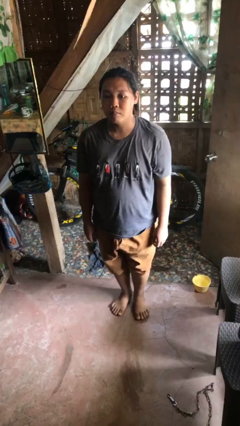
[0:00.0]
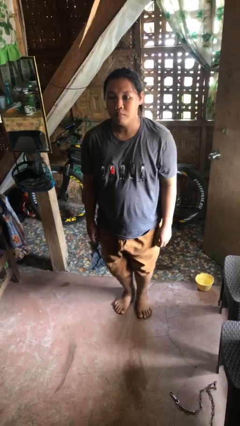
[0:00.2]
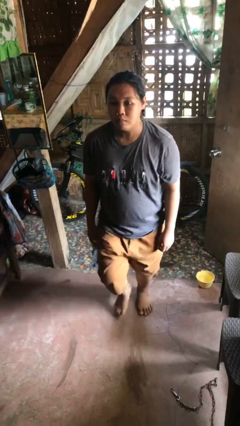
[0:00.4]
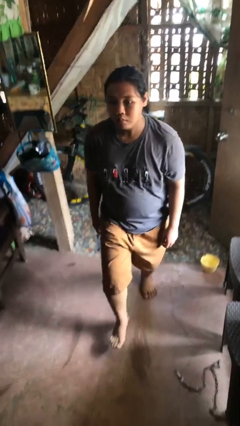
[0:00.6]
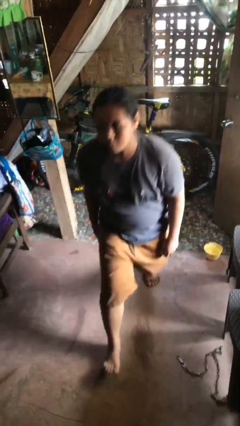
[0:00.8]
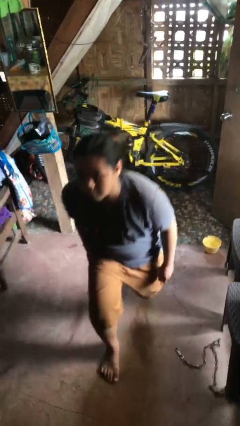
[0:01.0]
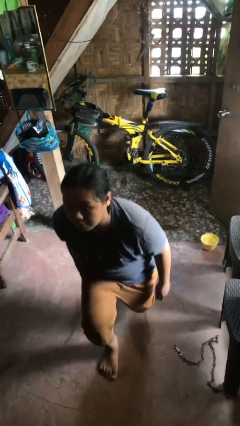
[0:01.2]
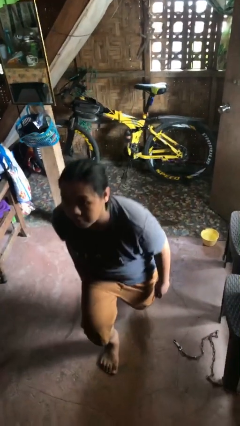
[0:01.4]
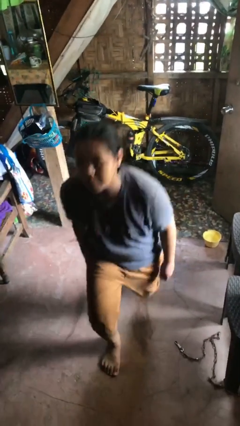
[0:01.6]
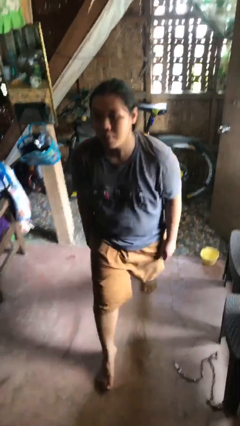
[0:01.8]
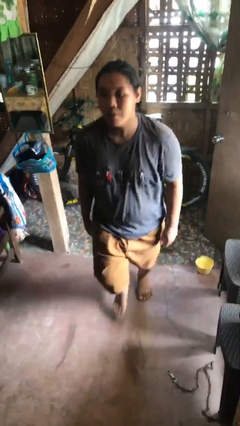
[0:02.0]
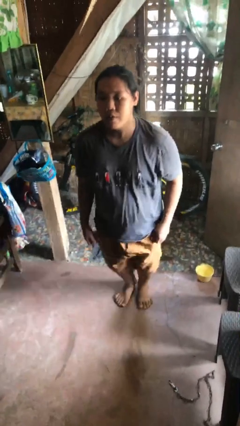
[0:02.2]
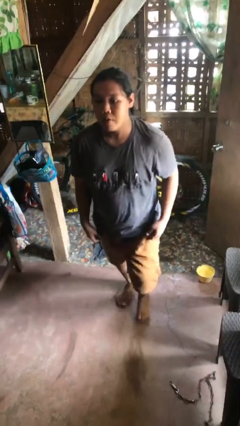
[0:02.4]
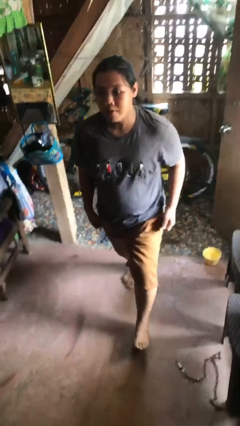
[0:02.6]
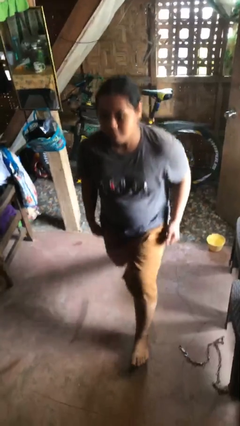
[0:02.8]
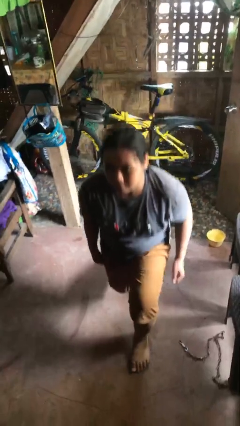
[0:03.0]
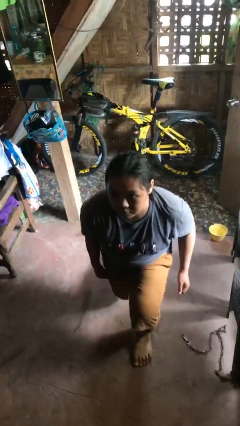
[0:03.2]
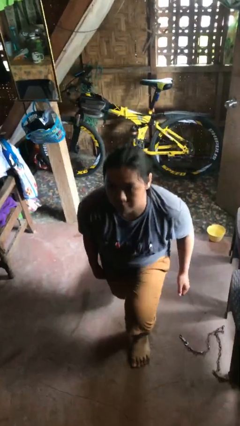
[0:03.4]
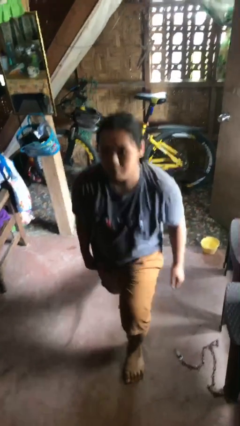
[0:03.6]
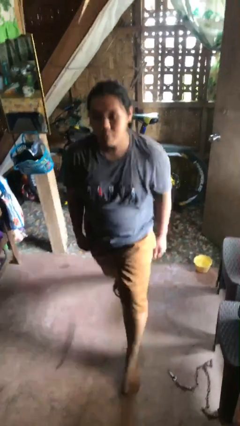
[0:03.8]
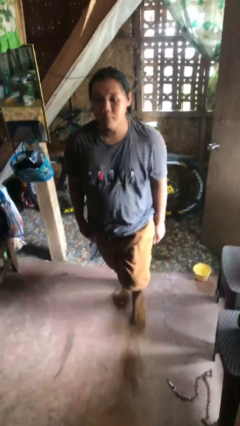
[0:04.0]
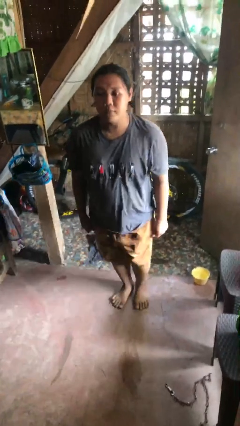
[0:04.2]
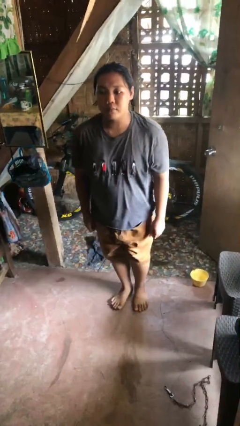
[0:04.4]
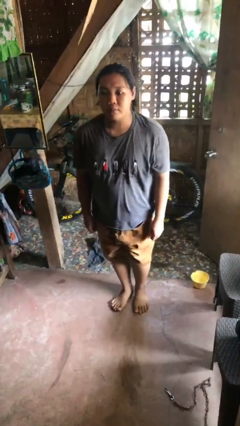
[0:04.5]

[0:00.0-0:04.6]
person exercises with lunges

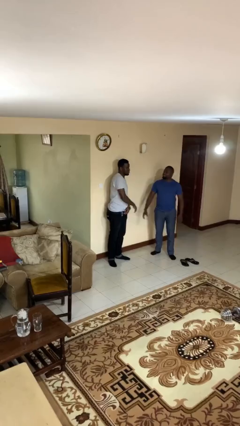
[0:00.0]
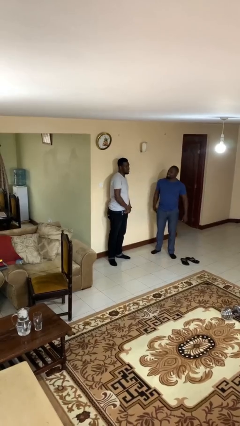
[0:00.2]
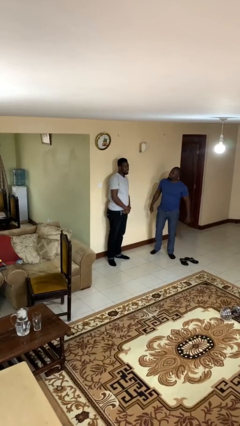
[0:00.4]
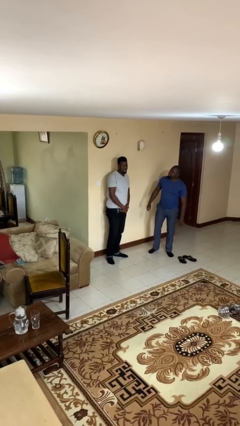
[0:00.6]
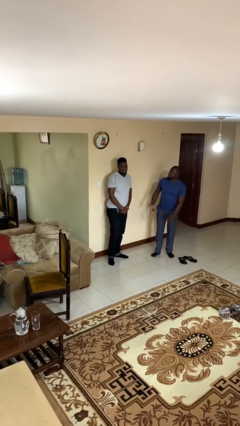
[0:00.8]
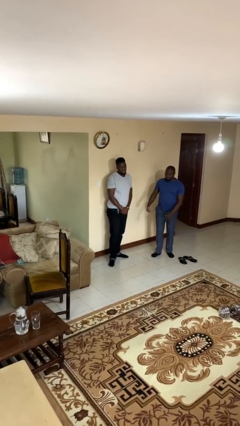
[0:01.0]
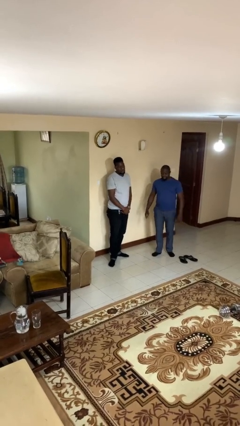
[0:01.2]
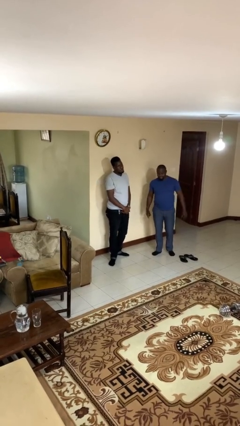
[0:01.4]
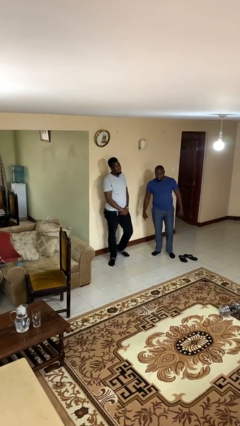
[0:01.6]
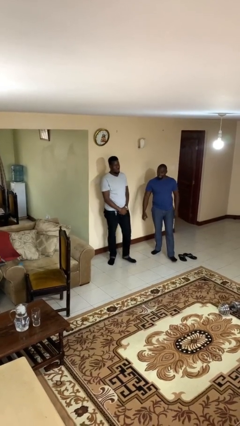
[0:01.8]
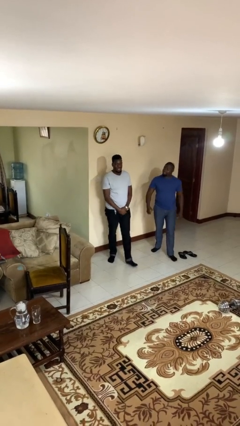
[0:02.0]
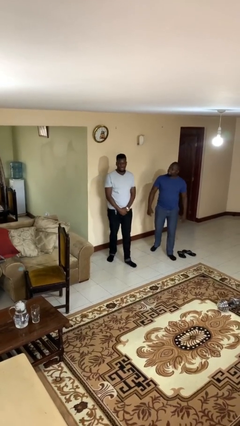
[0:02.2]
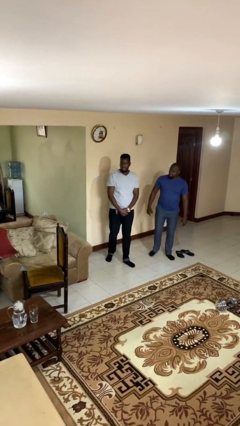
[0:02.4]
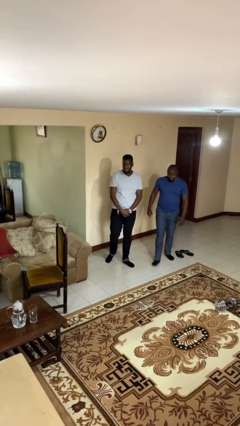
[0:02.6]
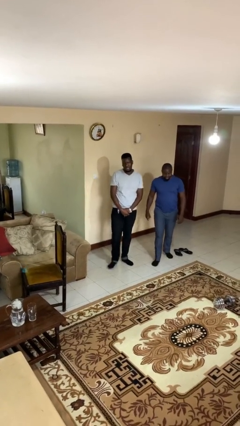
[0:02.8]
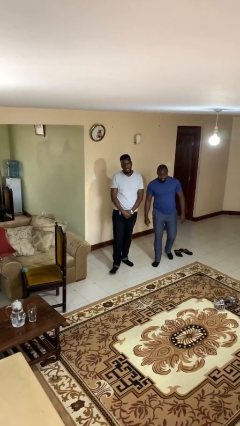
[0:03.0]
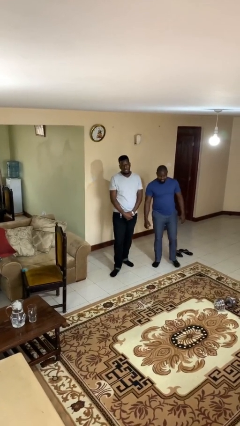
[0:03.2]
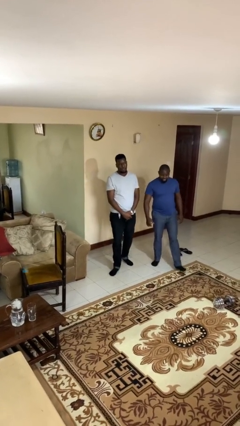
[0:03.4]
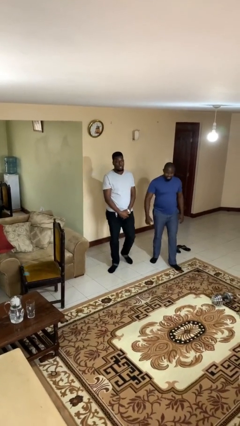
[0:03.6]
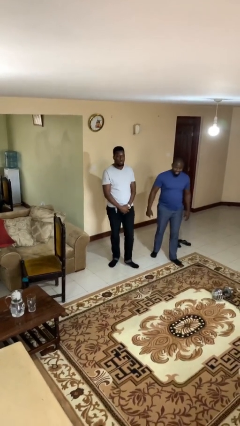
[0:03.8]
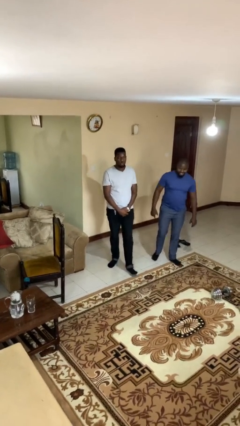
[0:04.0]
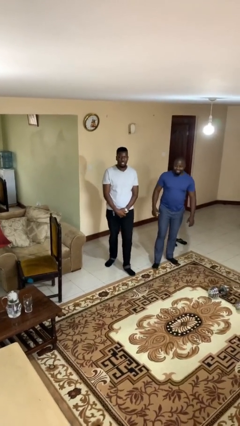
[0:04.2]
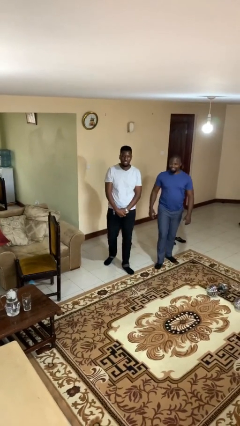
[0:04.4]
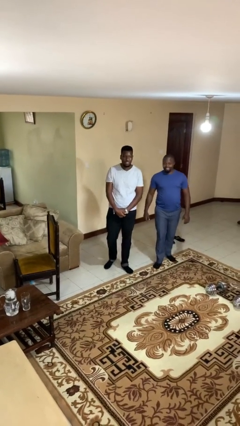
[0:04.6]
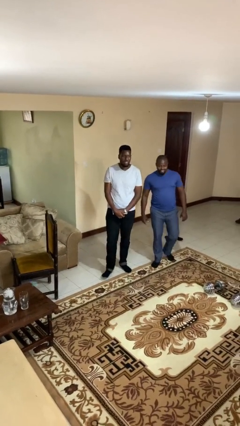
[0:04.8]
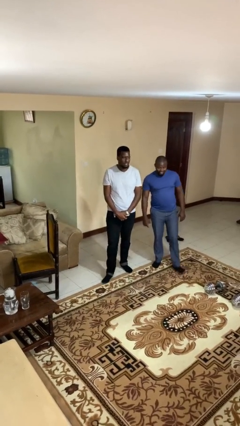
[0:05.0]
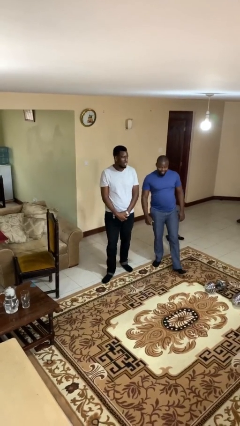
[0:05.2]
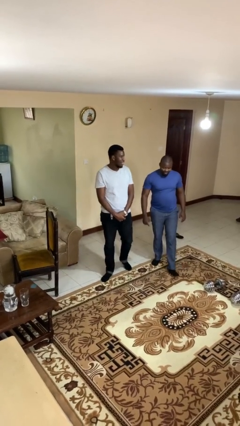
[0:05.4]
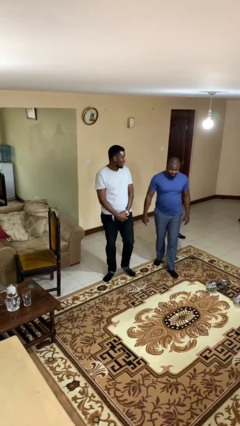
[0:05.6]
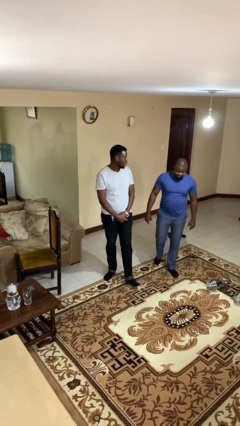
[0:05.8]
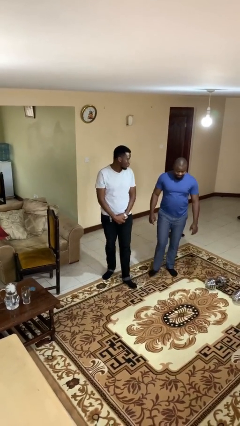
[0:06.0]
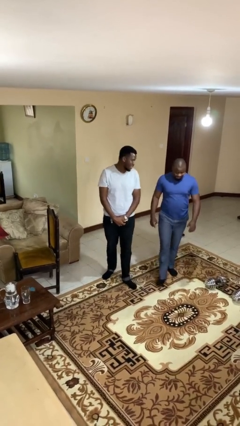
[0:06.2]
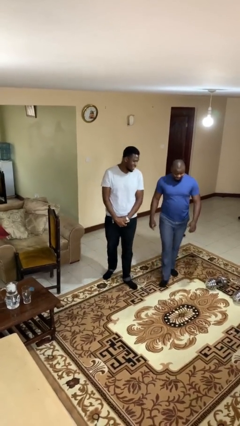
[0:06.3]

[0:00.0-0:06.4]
person talks to person

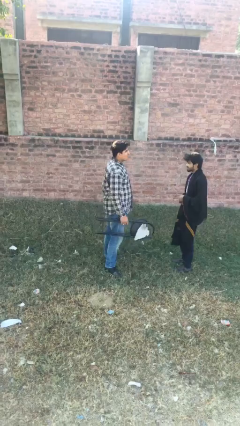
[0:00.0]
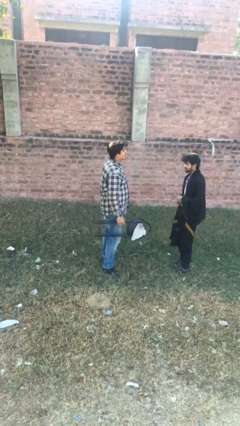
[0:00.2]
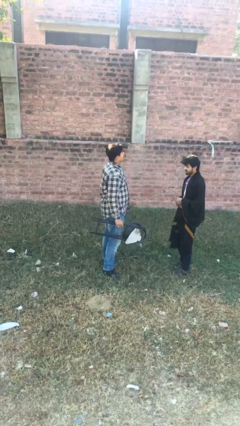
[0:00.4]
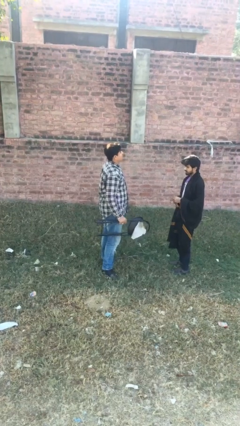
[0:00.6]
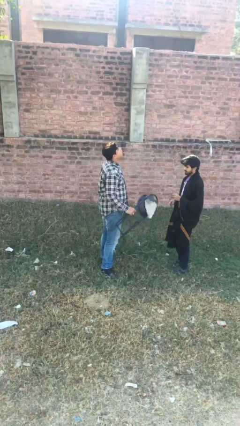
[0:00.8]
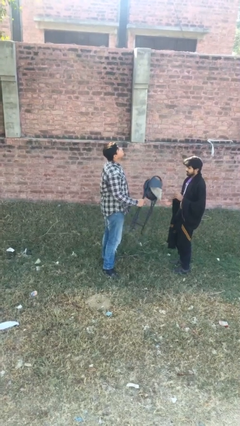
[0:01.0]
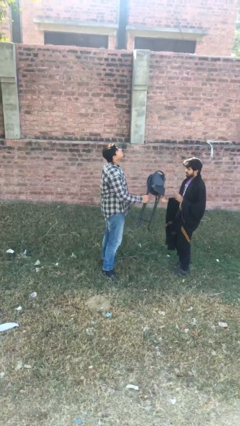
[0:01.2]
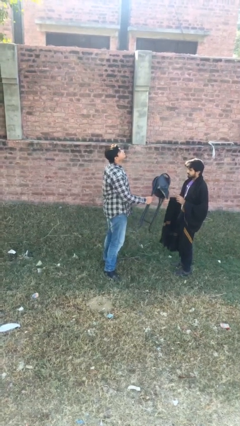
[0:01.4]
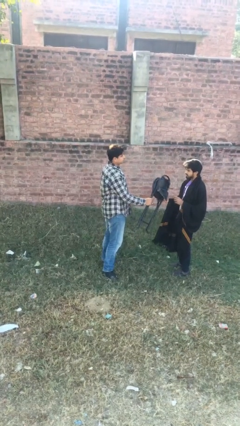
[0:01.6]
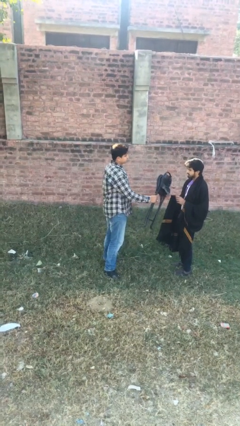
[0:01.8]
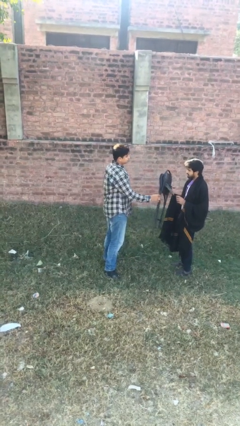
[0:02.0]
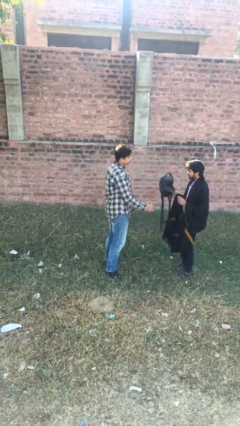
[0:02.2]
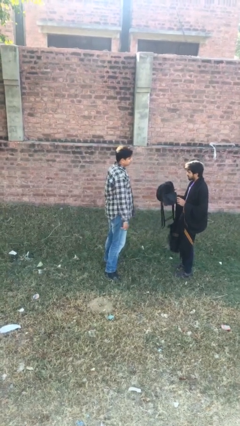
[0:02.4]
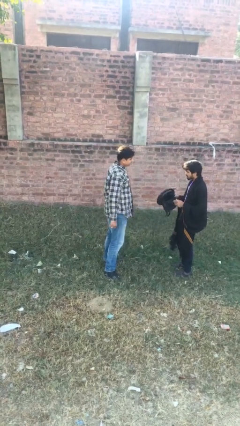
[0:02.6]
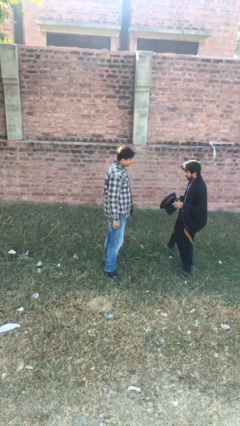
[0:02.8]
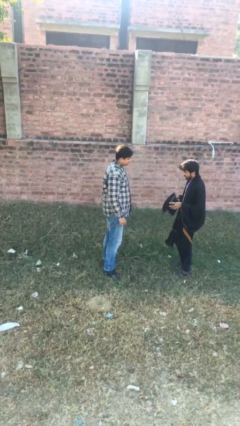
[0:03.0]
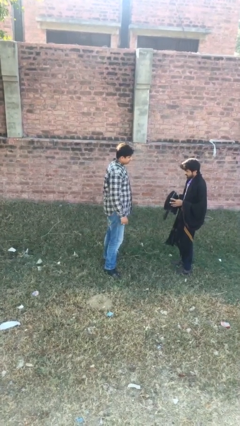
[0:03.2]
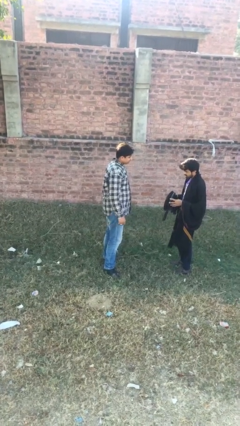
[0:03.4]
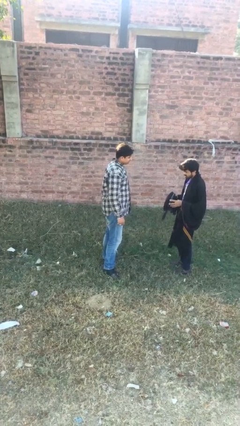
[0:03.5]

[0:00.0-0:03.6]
person transfers object to person

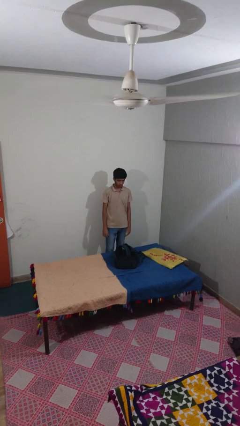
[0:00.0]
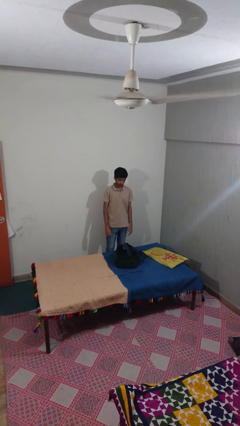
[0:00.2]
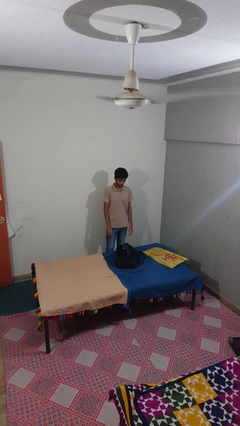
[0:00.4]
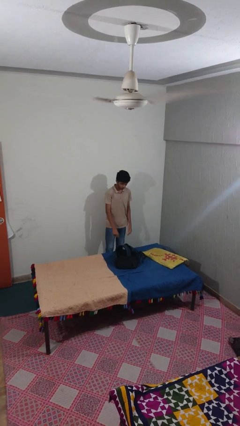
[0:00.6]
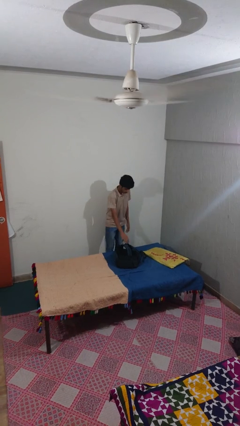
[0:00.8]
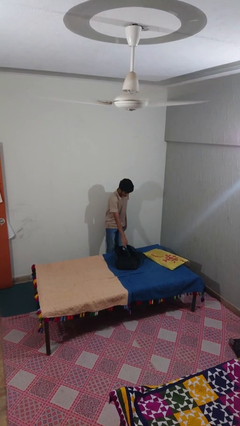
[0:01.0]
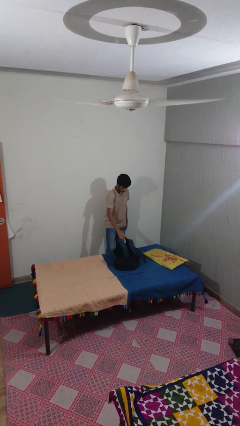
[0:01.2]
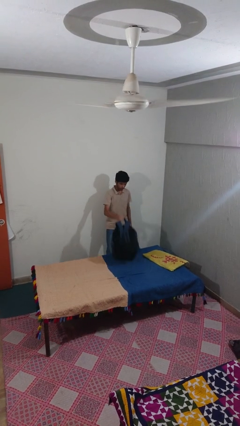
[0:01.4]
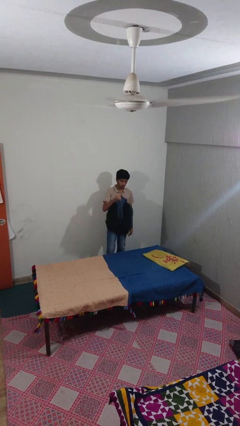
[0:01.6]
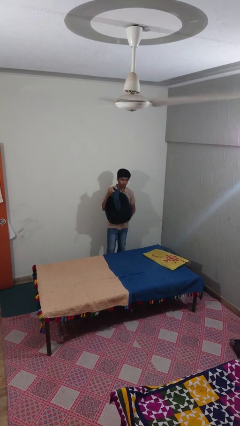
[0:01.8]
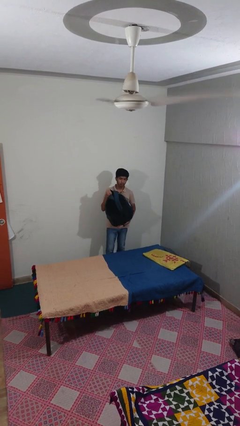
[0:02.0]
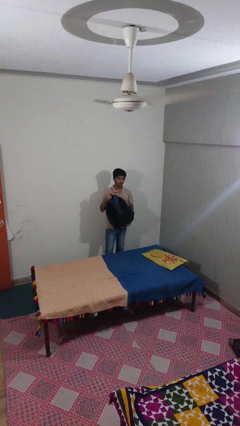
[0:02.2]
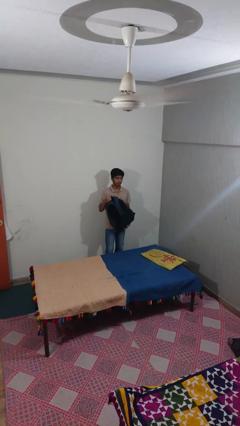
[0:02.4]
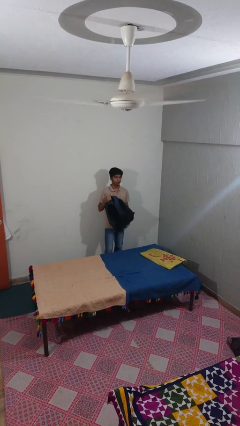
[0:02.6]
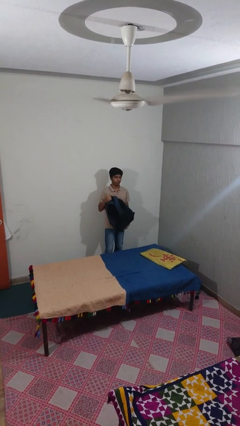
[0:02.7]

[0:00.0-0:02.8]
person picks up object from bed
